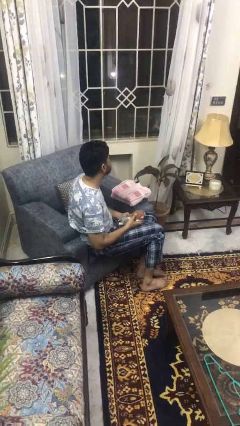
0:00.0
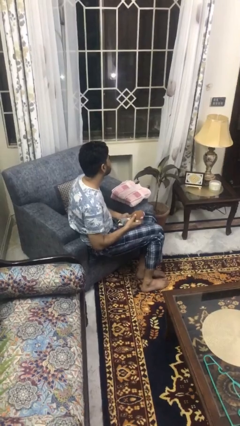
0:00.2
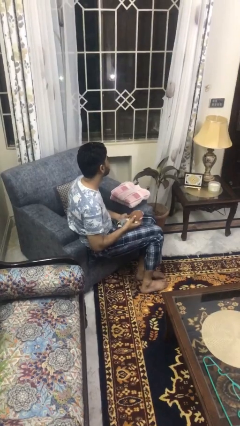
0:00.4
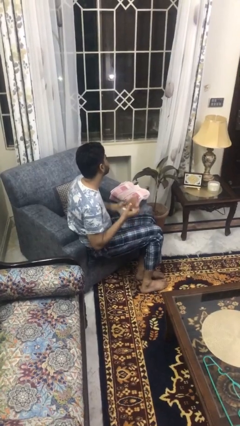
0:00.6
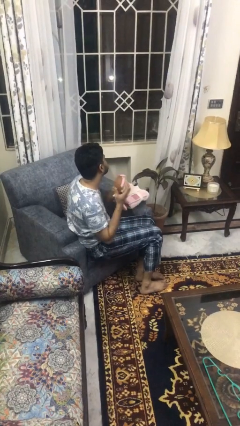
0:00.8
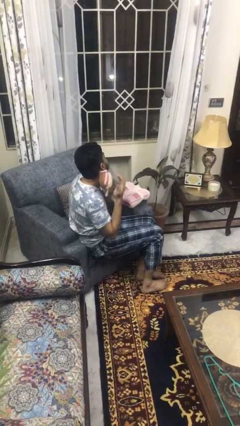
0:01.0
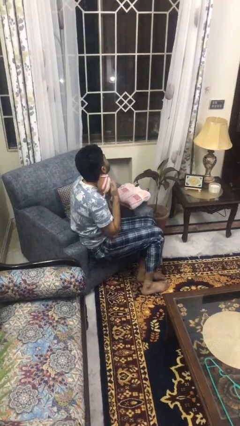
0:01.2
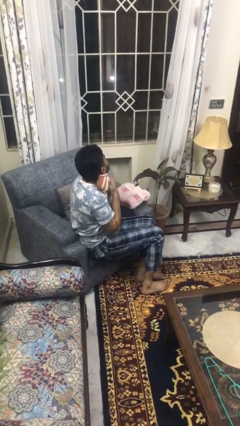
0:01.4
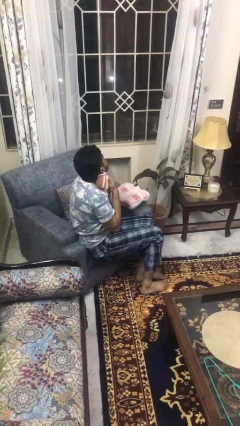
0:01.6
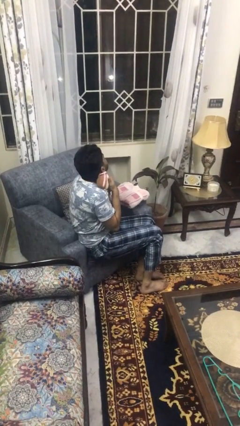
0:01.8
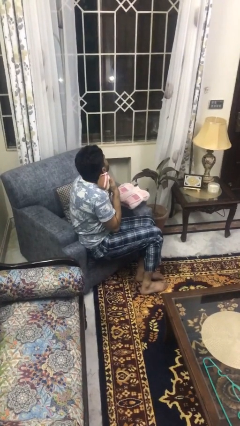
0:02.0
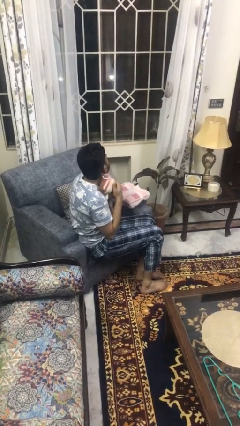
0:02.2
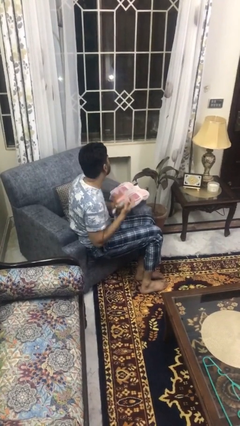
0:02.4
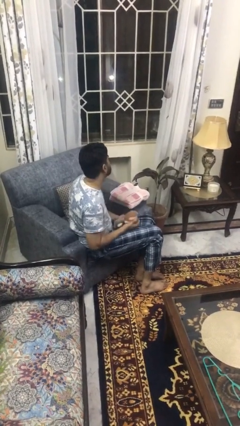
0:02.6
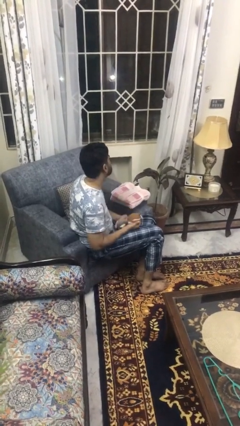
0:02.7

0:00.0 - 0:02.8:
person hugs stuffed animal

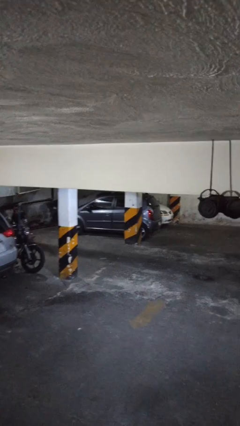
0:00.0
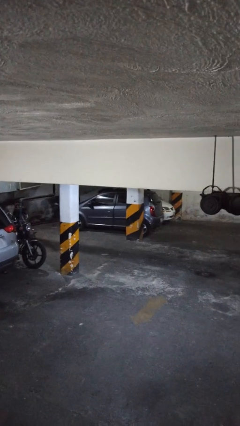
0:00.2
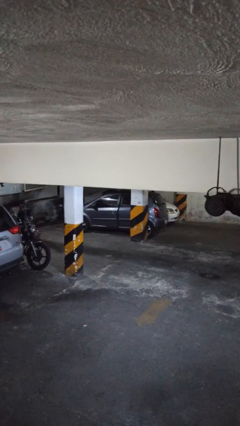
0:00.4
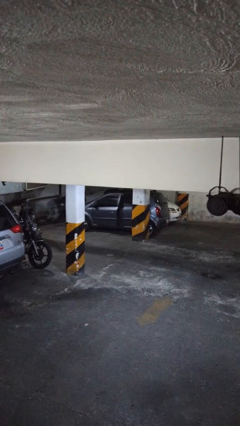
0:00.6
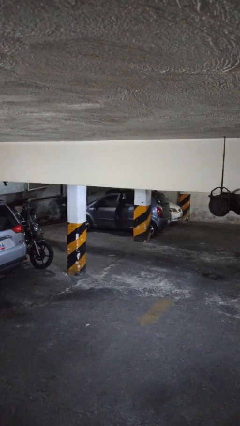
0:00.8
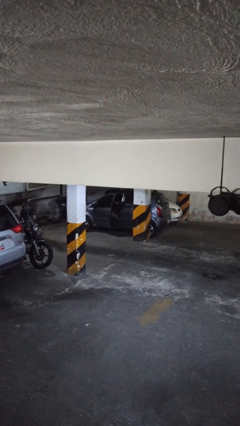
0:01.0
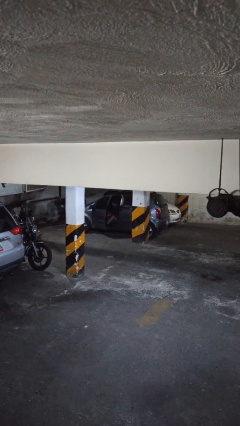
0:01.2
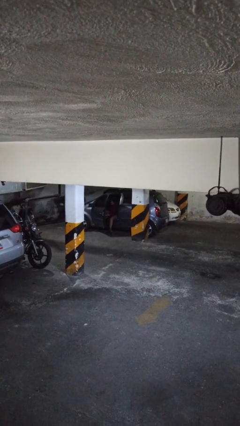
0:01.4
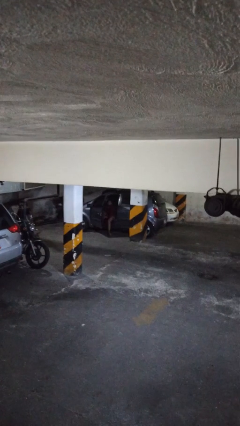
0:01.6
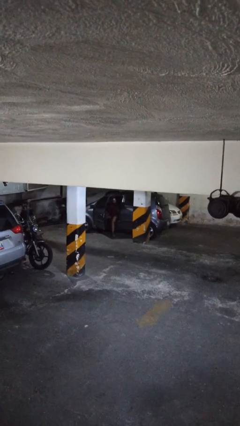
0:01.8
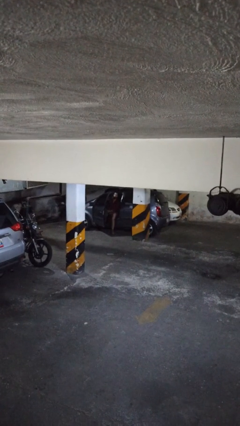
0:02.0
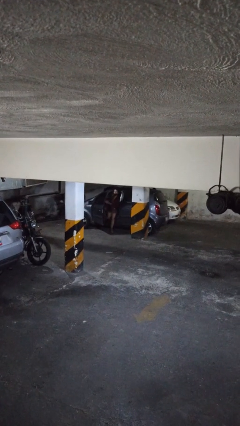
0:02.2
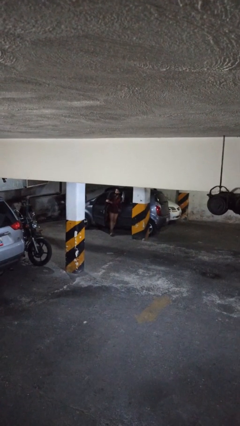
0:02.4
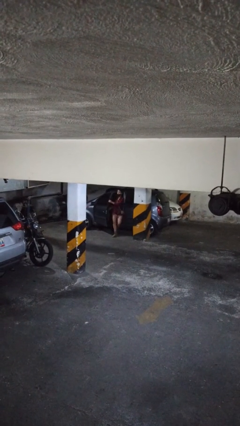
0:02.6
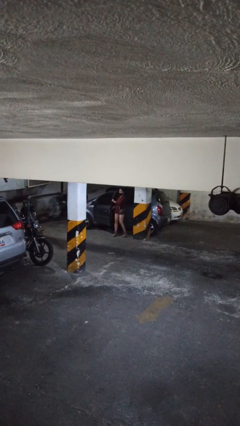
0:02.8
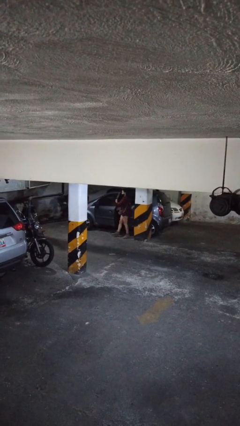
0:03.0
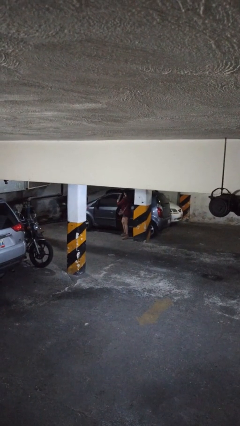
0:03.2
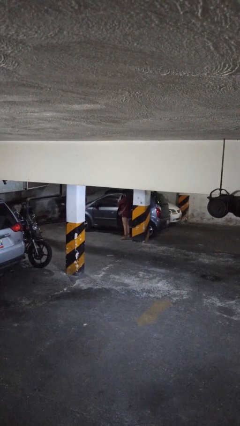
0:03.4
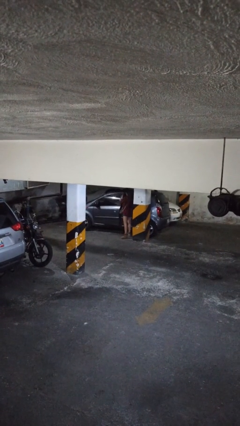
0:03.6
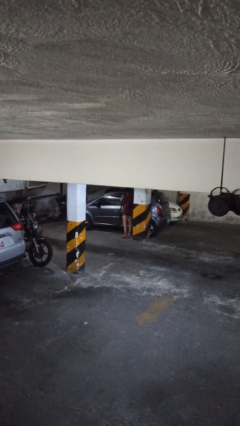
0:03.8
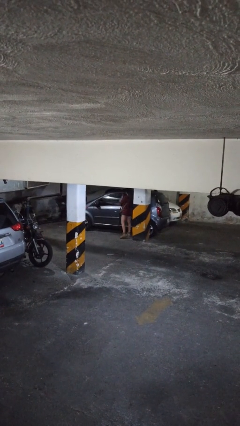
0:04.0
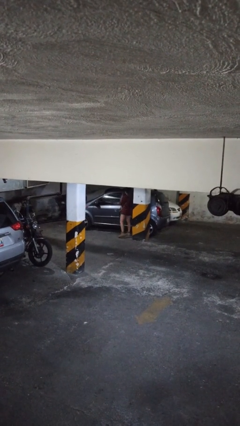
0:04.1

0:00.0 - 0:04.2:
car drops off person

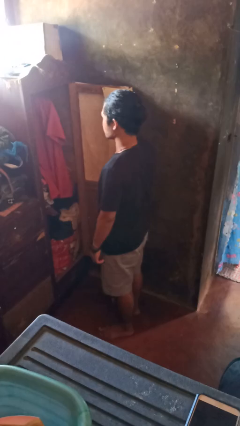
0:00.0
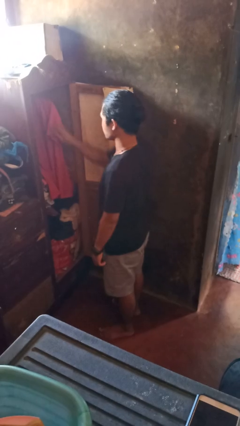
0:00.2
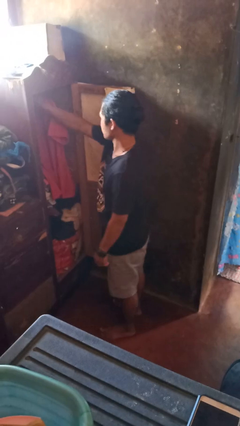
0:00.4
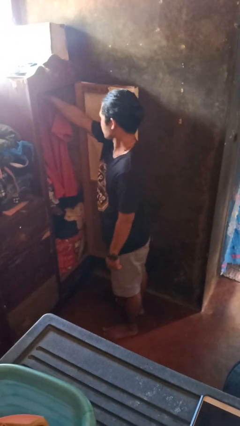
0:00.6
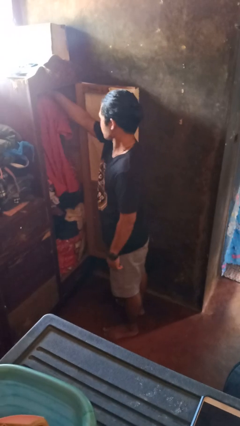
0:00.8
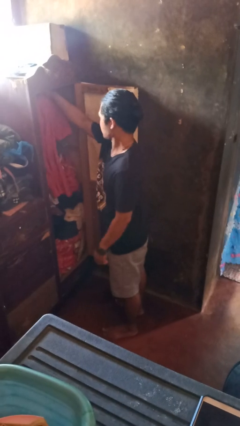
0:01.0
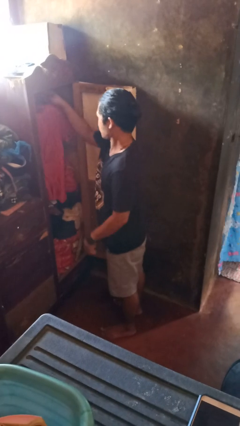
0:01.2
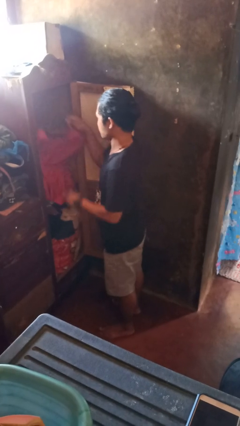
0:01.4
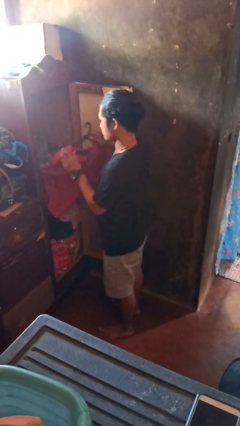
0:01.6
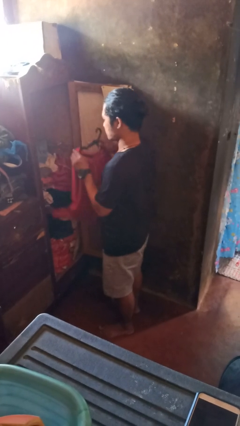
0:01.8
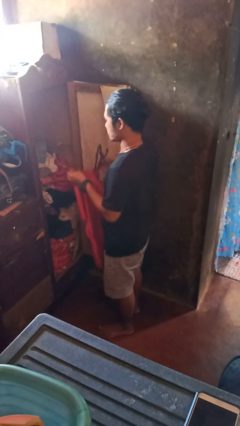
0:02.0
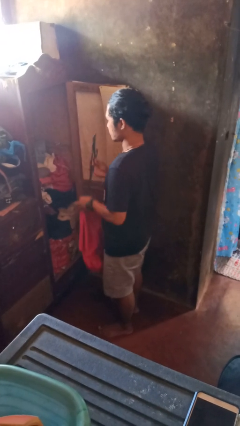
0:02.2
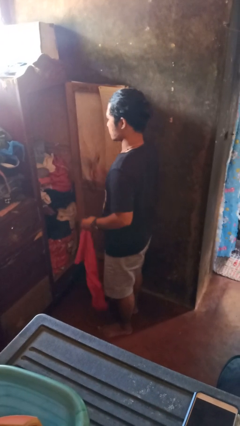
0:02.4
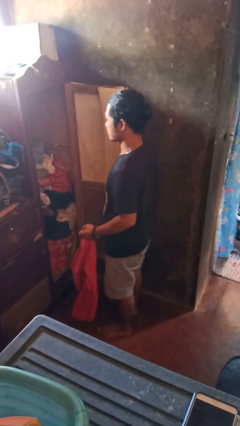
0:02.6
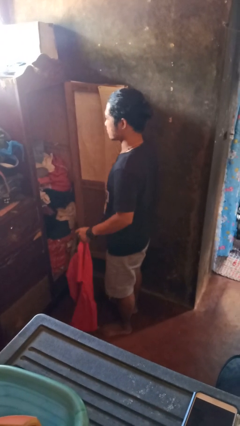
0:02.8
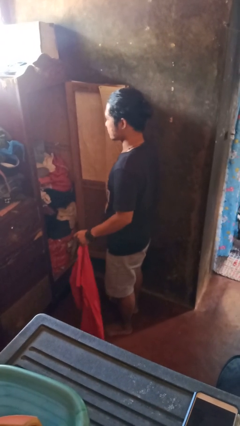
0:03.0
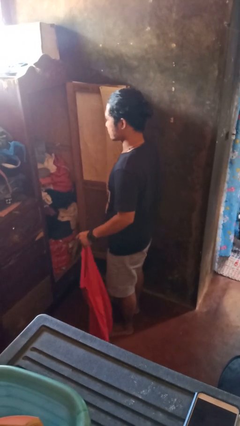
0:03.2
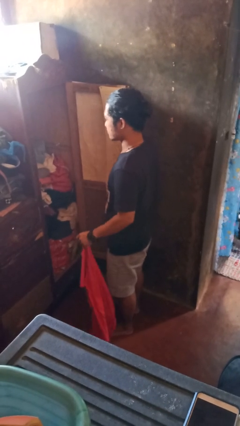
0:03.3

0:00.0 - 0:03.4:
person takes clothes from closet

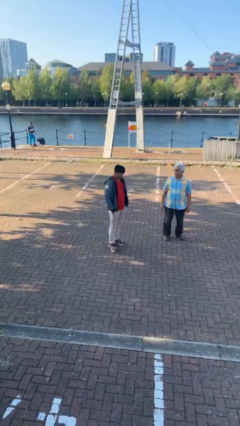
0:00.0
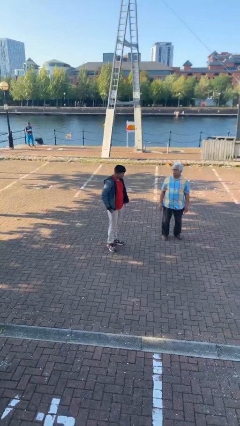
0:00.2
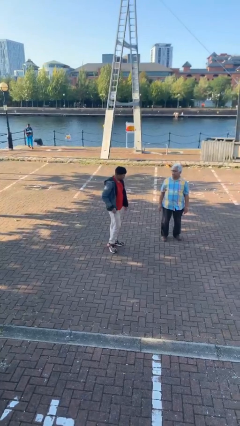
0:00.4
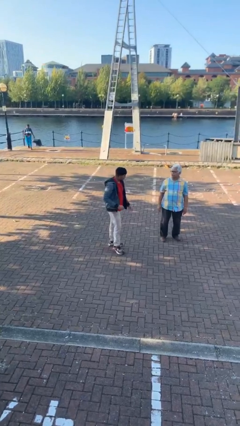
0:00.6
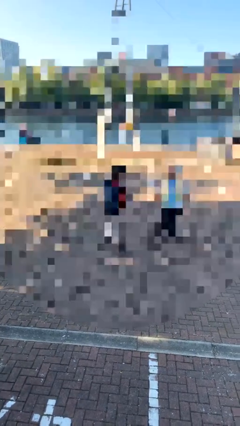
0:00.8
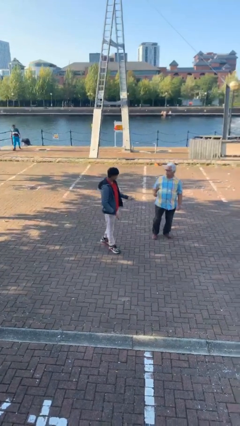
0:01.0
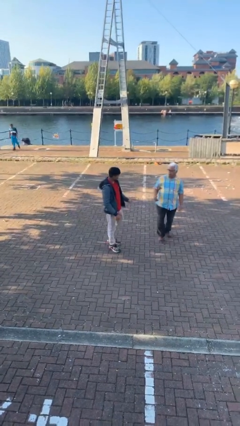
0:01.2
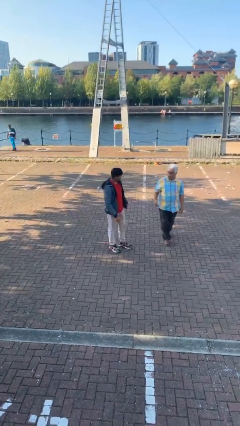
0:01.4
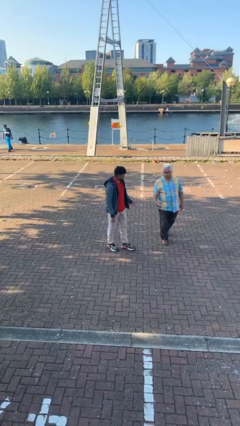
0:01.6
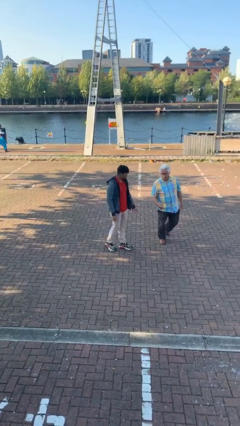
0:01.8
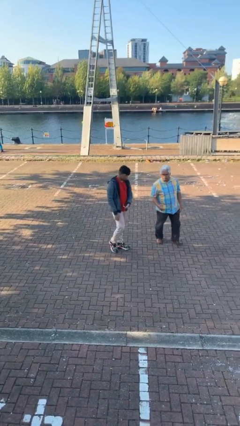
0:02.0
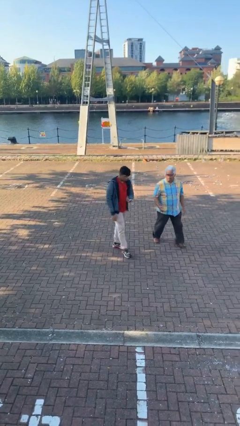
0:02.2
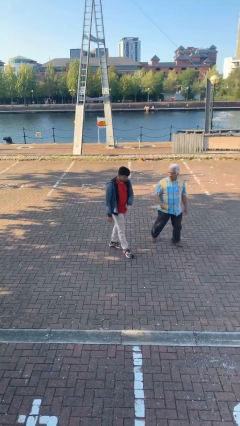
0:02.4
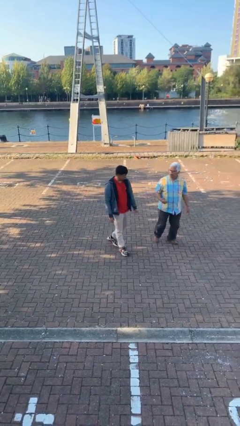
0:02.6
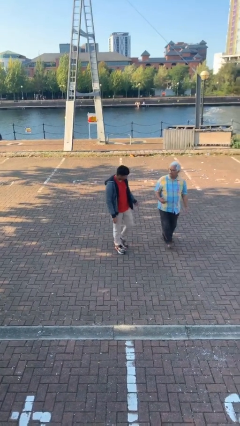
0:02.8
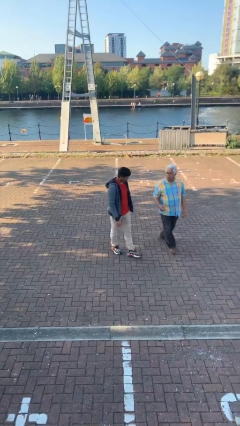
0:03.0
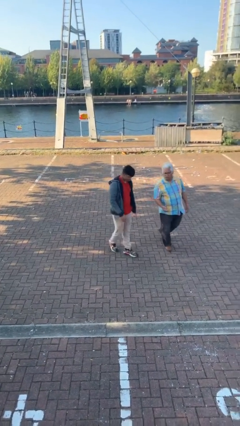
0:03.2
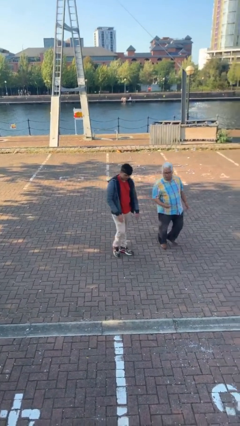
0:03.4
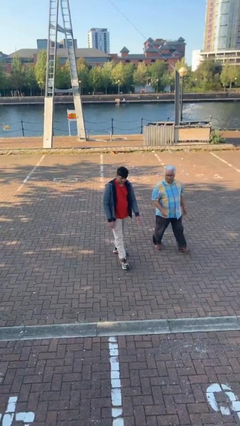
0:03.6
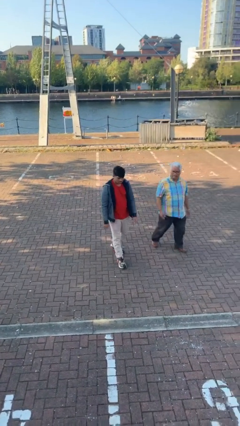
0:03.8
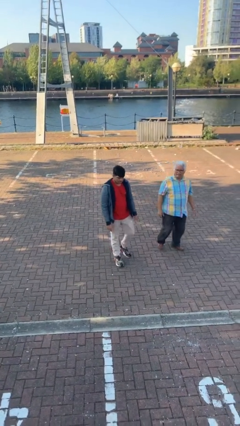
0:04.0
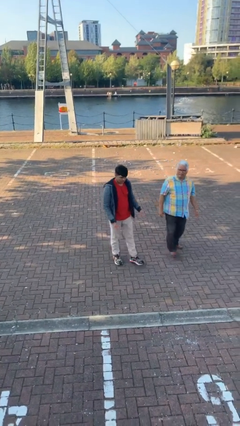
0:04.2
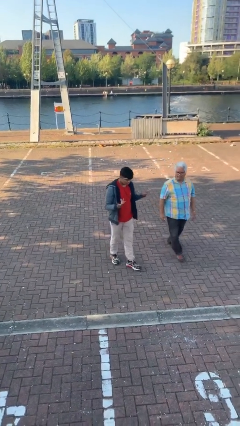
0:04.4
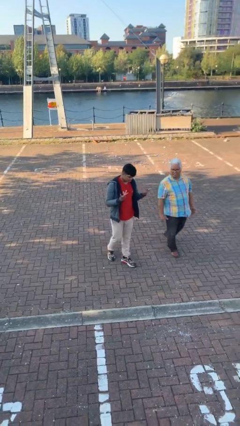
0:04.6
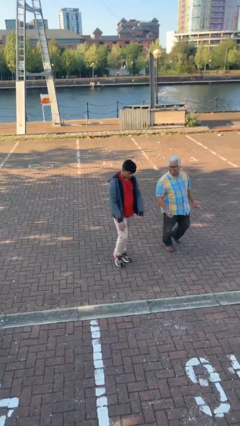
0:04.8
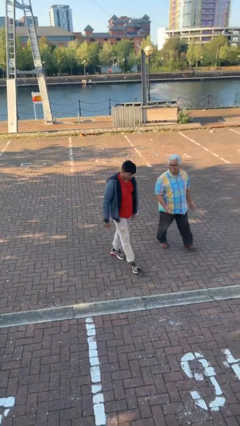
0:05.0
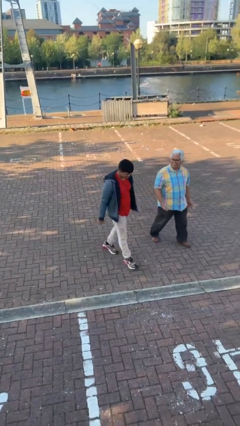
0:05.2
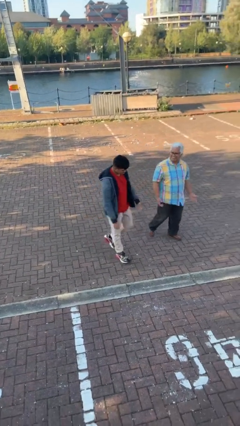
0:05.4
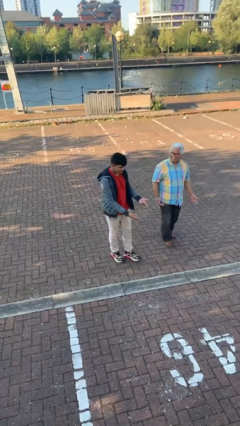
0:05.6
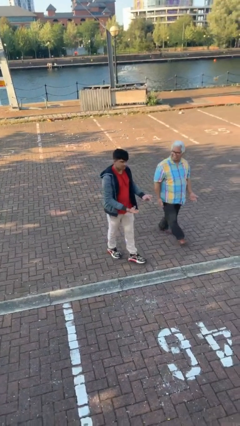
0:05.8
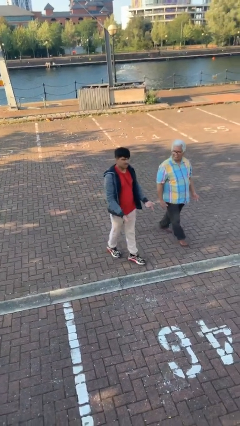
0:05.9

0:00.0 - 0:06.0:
person talks to person

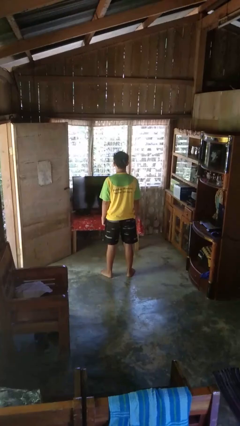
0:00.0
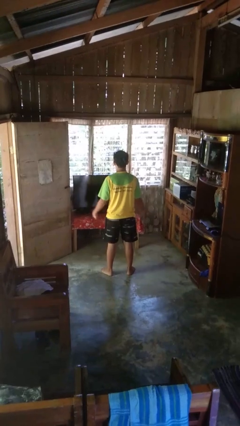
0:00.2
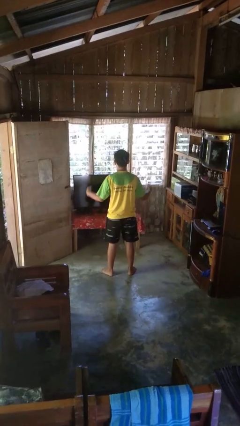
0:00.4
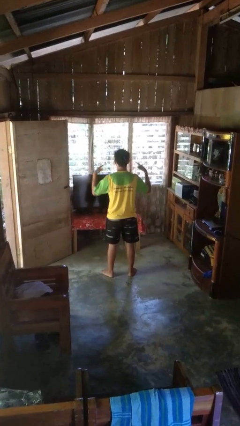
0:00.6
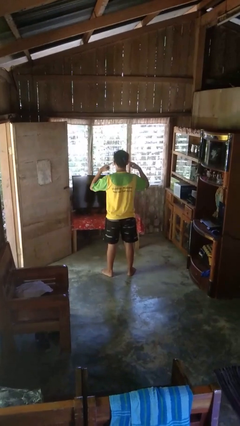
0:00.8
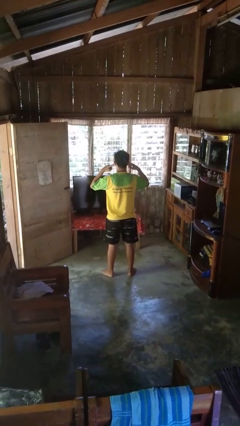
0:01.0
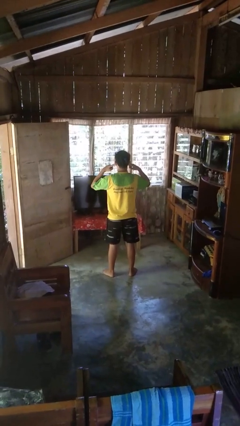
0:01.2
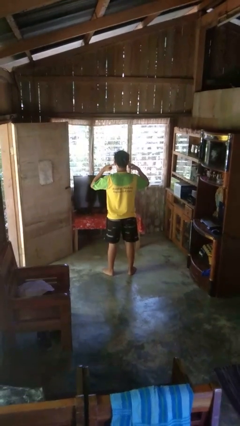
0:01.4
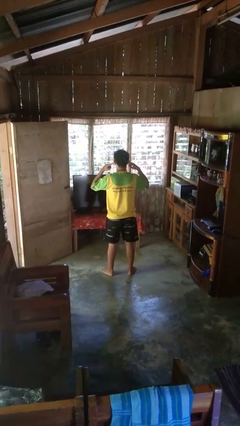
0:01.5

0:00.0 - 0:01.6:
person puts fingers in ear
